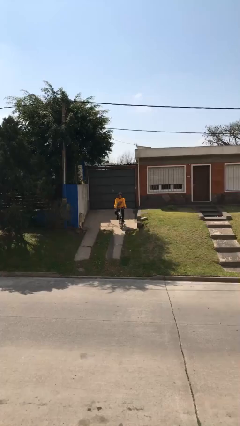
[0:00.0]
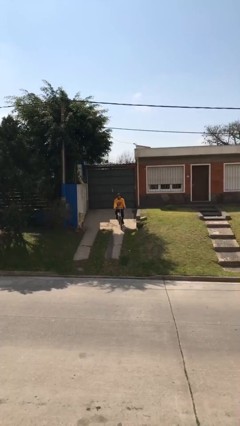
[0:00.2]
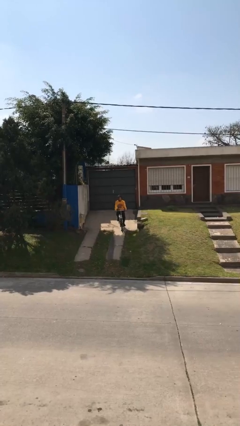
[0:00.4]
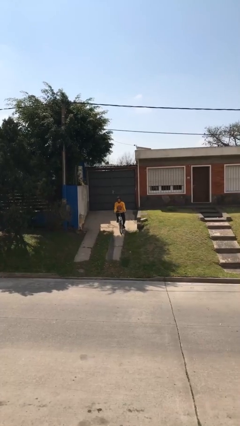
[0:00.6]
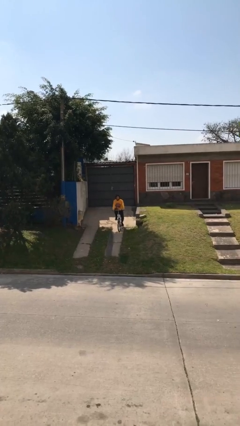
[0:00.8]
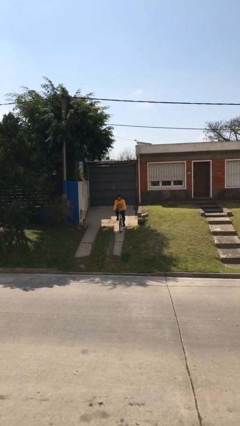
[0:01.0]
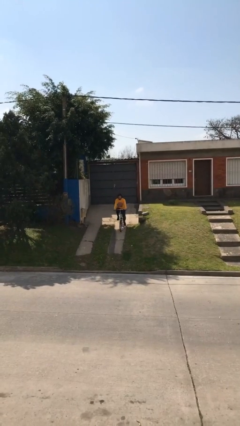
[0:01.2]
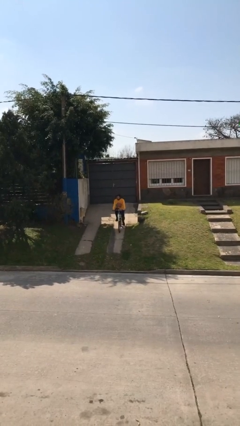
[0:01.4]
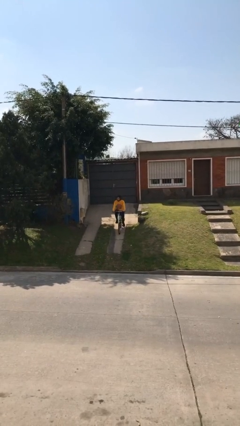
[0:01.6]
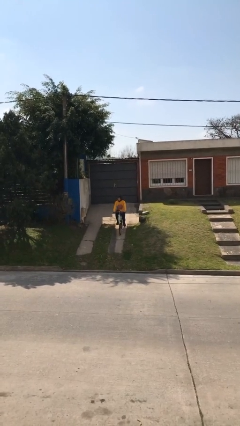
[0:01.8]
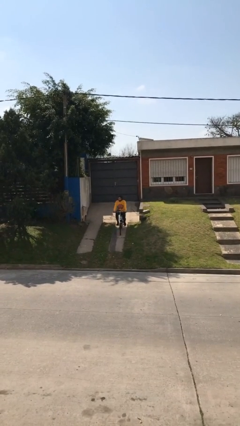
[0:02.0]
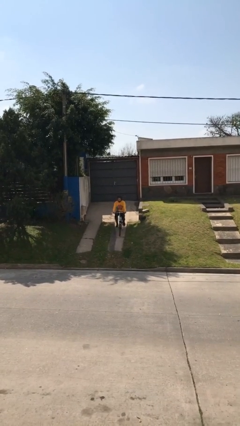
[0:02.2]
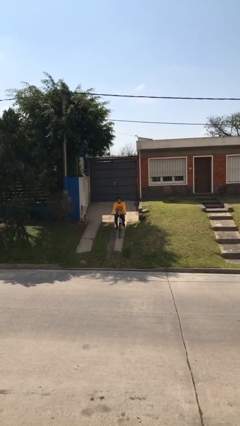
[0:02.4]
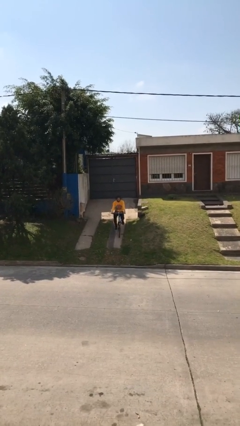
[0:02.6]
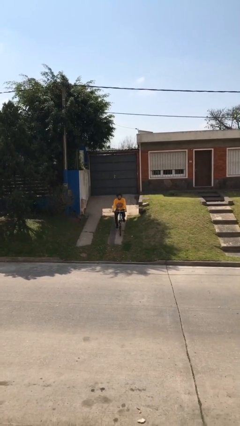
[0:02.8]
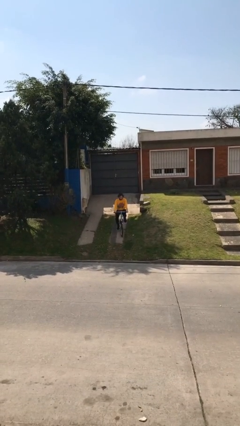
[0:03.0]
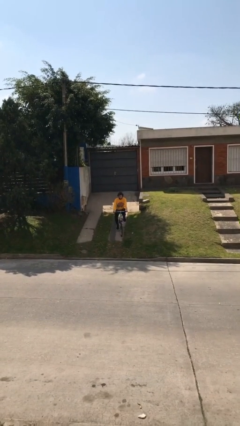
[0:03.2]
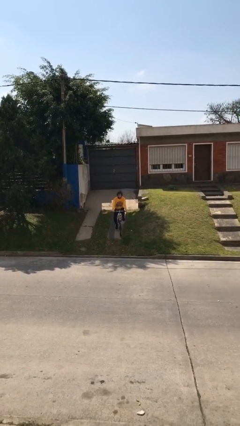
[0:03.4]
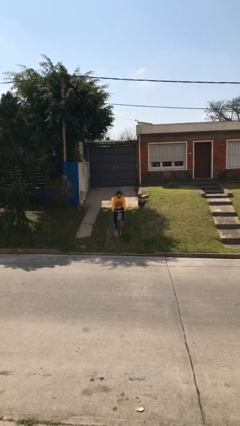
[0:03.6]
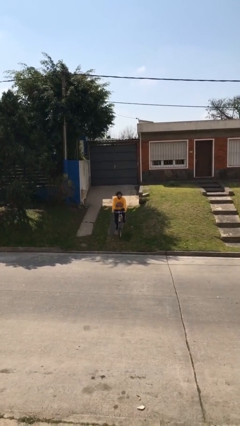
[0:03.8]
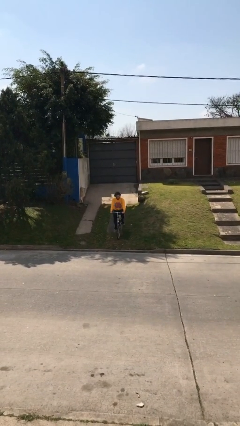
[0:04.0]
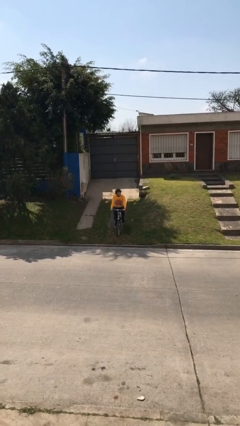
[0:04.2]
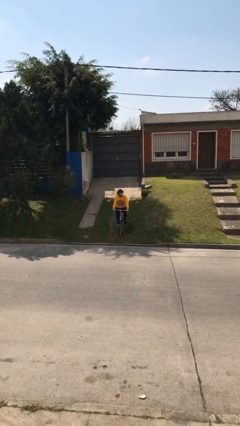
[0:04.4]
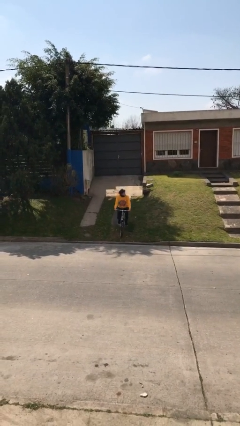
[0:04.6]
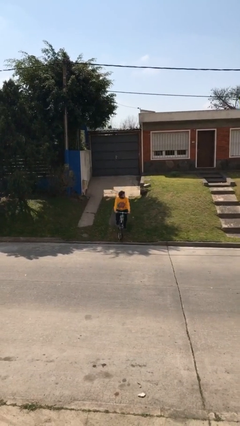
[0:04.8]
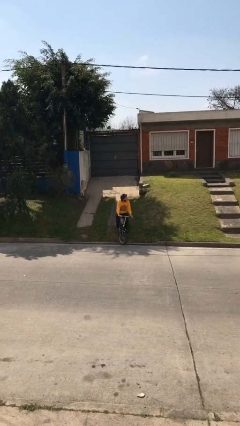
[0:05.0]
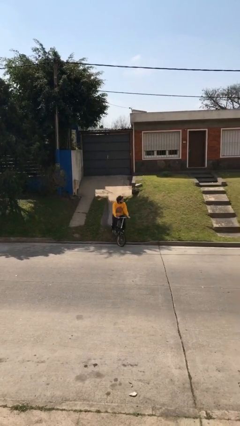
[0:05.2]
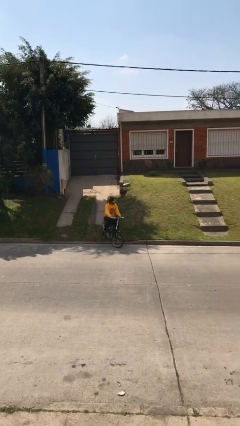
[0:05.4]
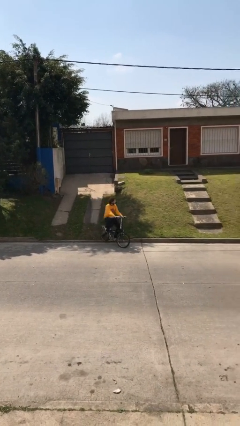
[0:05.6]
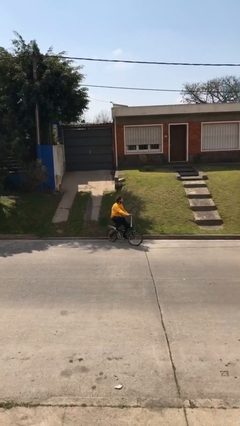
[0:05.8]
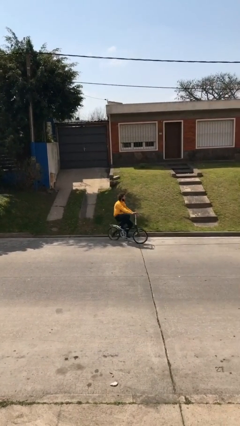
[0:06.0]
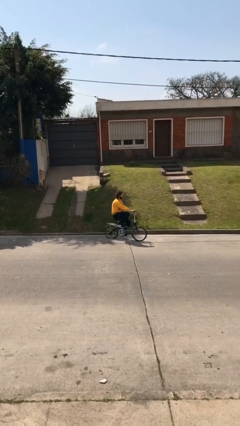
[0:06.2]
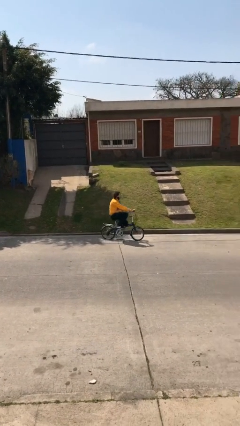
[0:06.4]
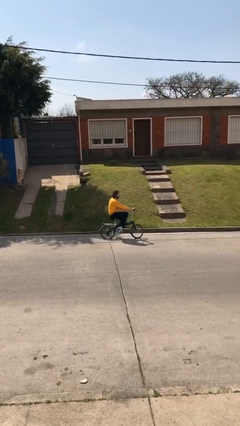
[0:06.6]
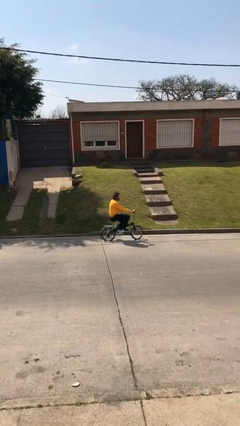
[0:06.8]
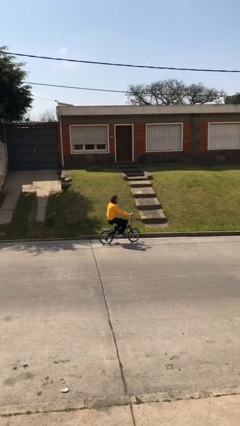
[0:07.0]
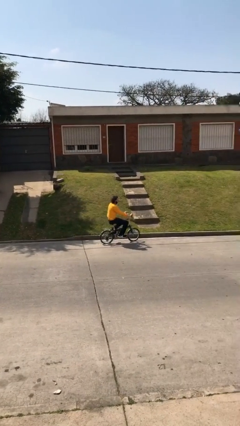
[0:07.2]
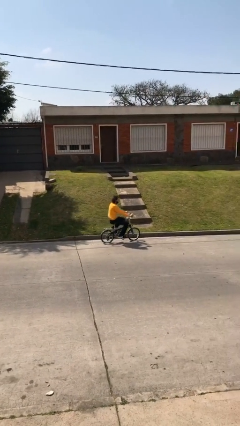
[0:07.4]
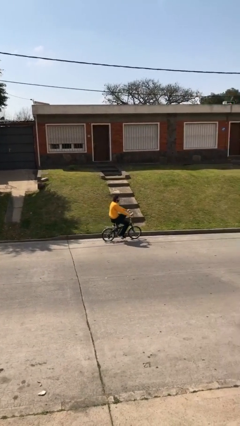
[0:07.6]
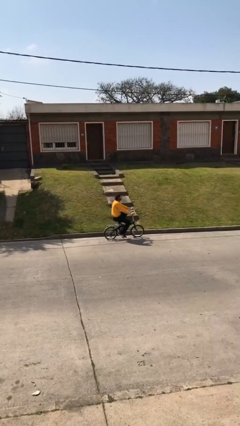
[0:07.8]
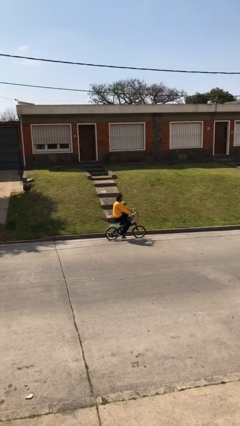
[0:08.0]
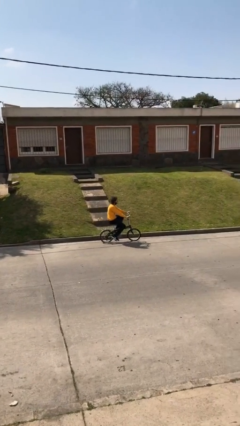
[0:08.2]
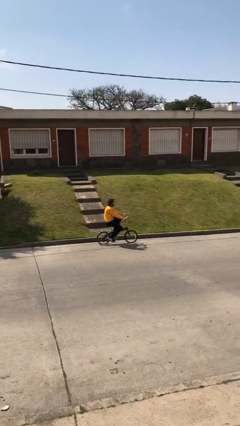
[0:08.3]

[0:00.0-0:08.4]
person rides bicycle

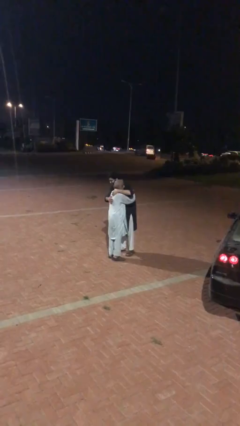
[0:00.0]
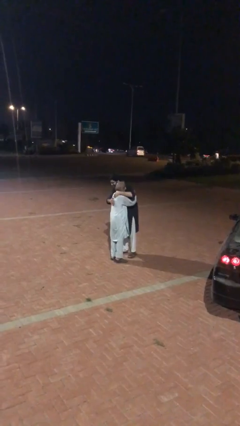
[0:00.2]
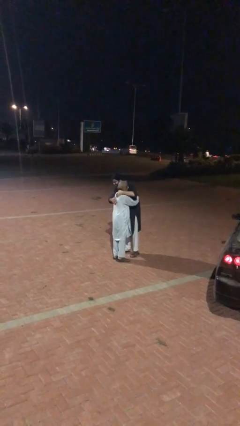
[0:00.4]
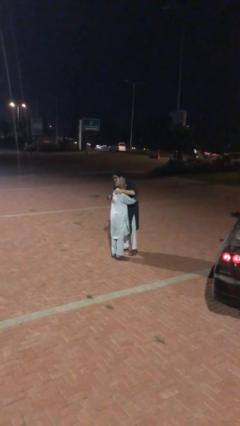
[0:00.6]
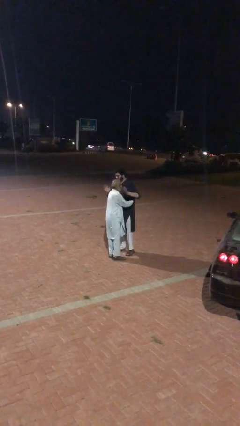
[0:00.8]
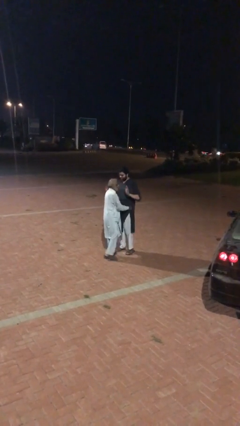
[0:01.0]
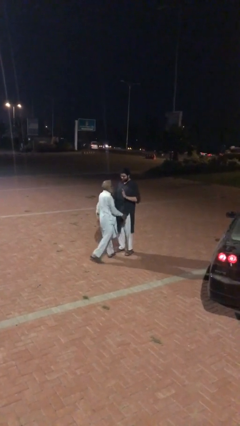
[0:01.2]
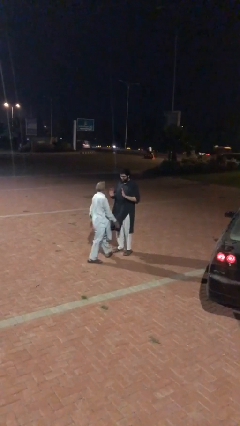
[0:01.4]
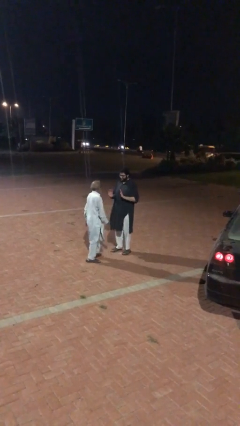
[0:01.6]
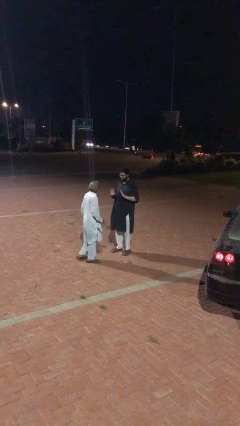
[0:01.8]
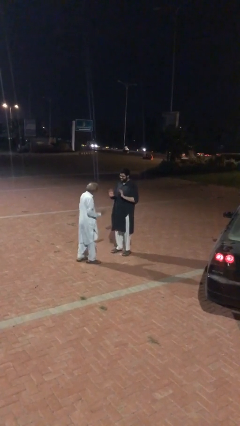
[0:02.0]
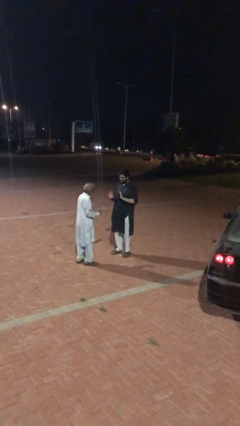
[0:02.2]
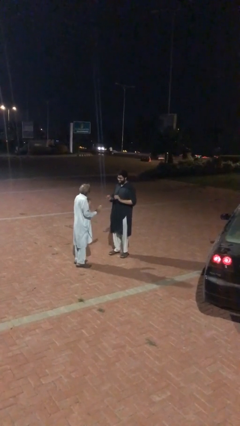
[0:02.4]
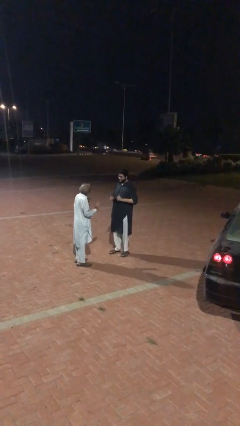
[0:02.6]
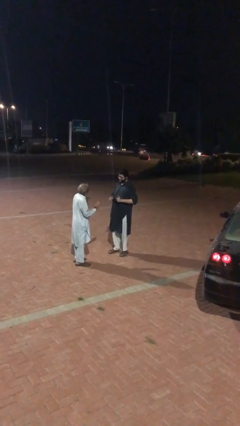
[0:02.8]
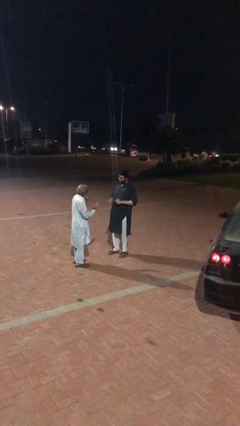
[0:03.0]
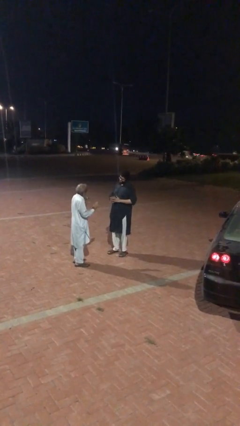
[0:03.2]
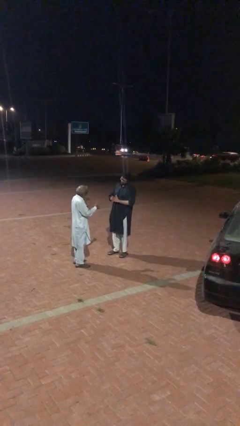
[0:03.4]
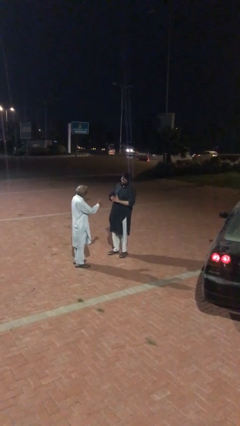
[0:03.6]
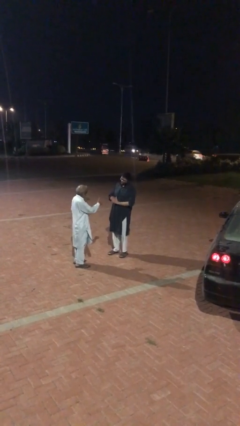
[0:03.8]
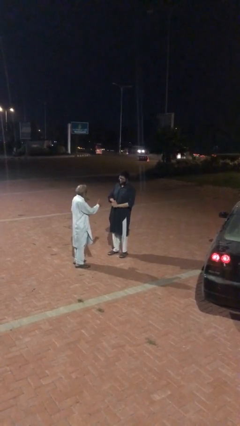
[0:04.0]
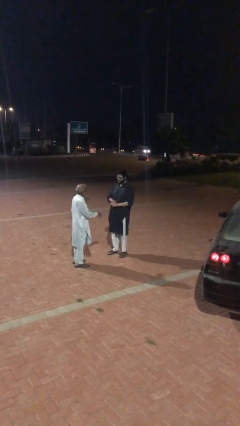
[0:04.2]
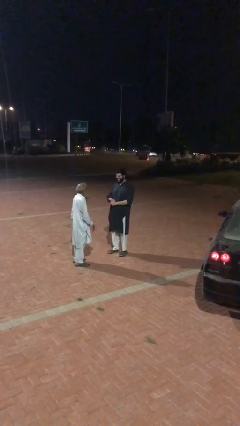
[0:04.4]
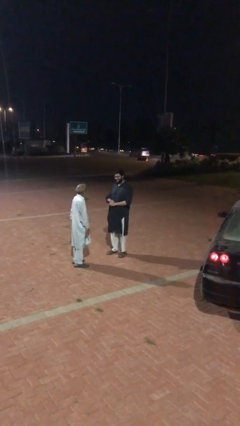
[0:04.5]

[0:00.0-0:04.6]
person talks to person

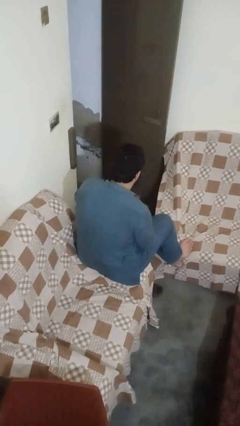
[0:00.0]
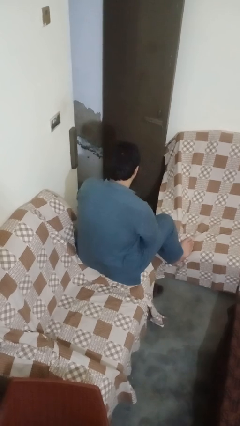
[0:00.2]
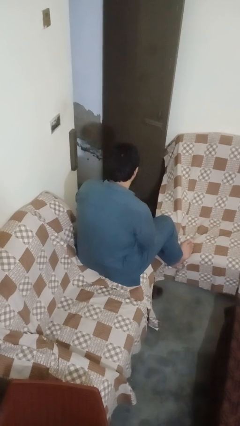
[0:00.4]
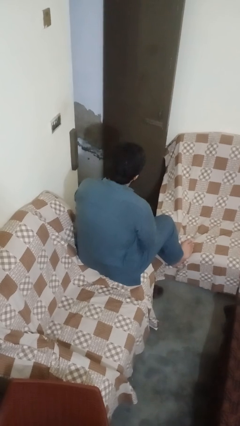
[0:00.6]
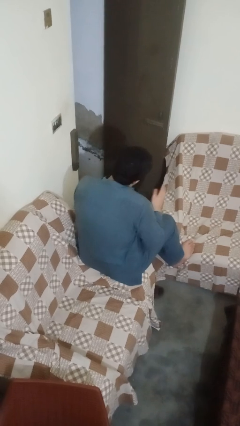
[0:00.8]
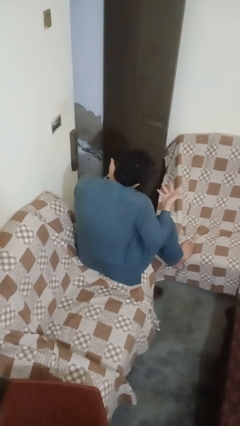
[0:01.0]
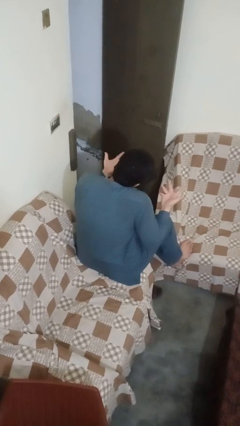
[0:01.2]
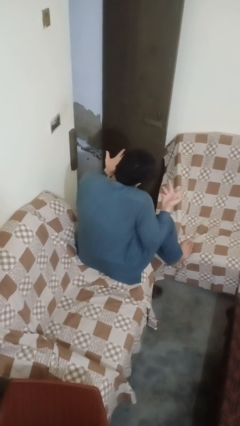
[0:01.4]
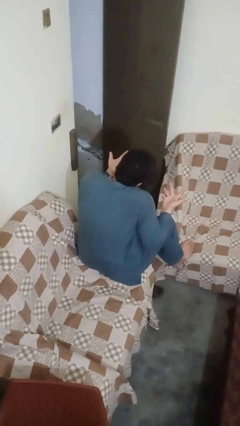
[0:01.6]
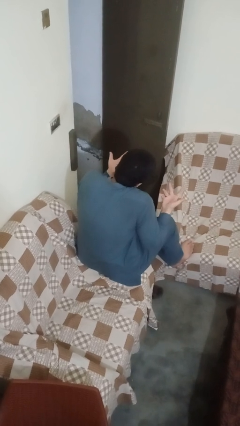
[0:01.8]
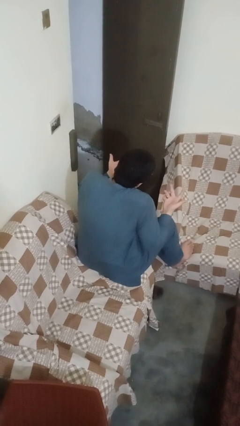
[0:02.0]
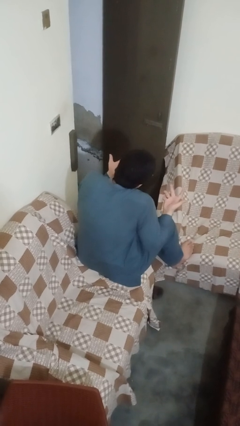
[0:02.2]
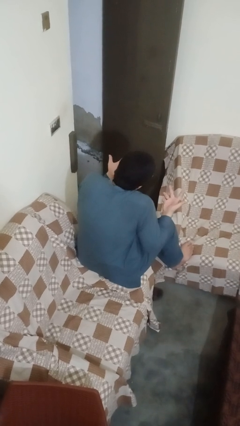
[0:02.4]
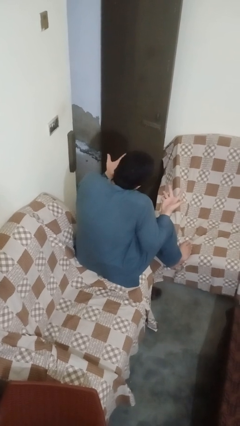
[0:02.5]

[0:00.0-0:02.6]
person shrugs

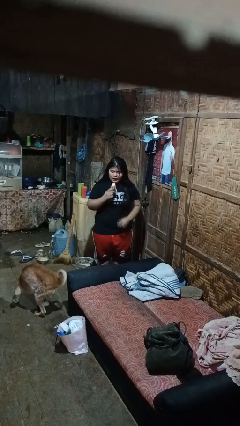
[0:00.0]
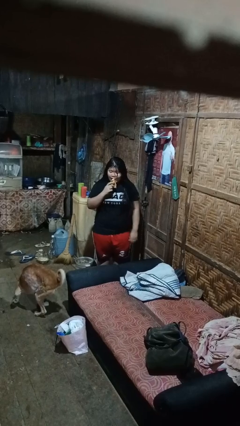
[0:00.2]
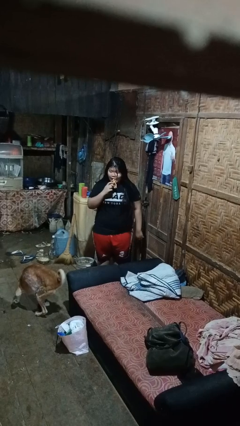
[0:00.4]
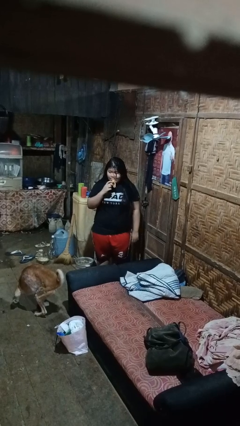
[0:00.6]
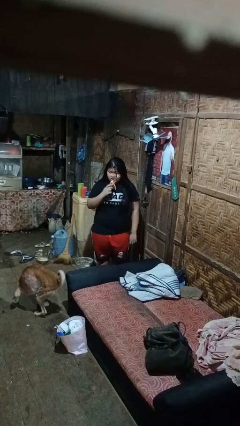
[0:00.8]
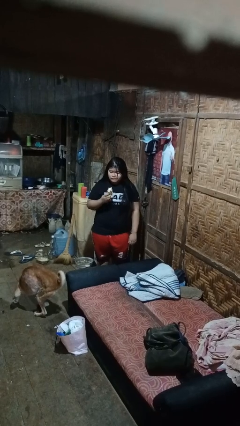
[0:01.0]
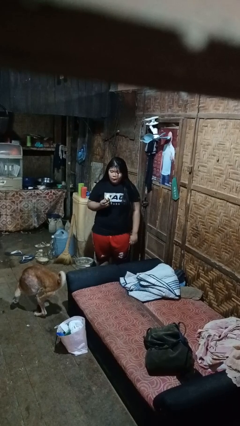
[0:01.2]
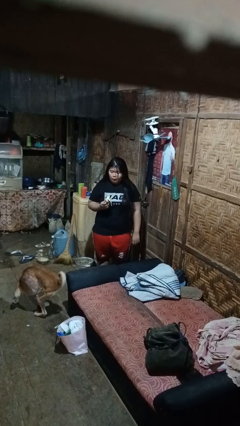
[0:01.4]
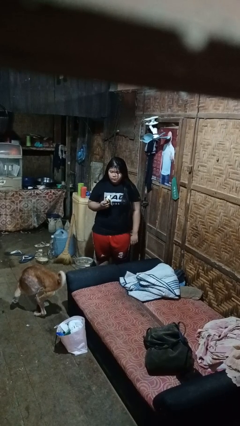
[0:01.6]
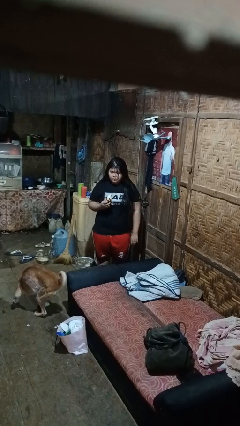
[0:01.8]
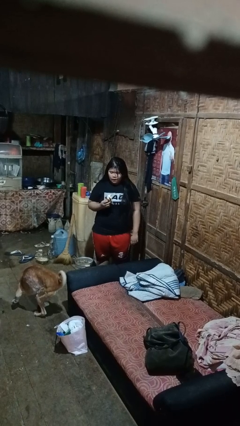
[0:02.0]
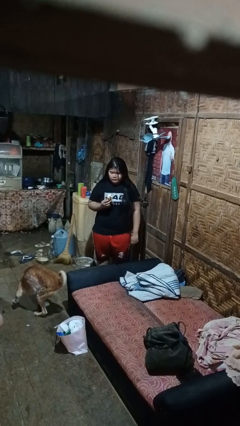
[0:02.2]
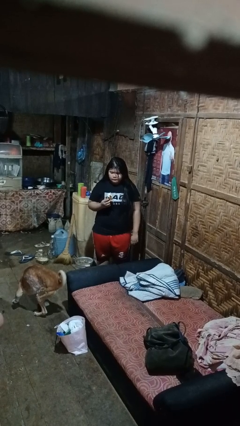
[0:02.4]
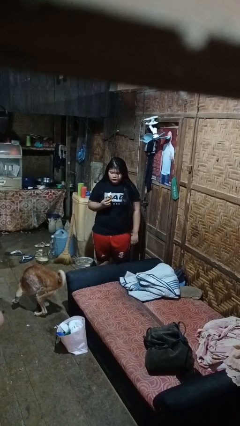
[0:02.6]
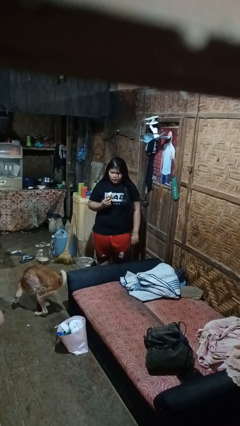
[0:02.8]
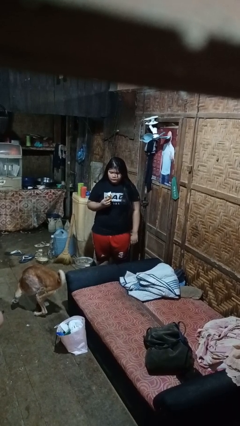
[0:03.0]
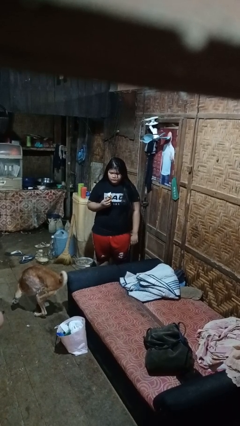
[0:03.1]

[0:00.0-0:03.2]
person eats banana
